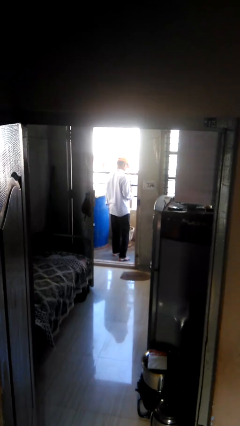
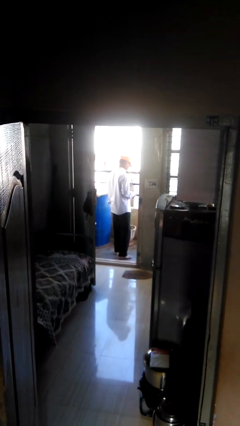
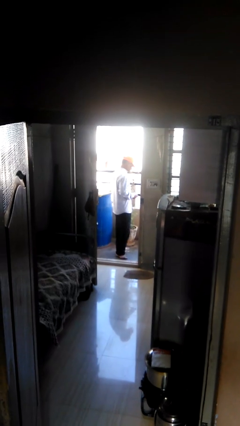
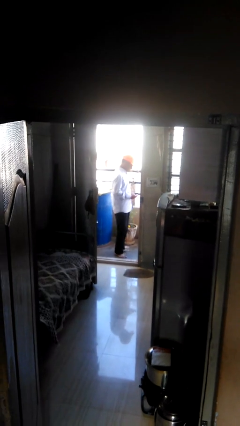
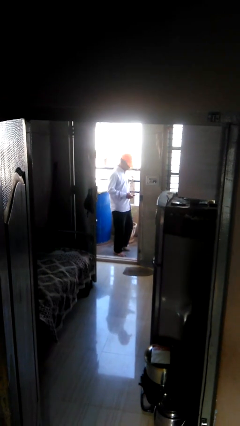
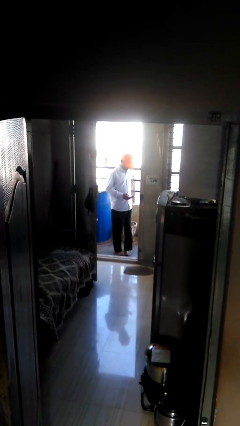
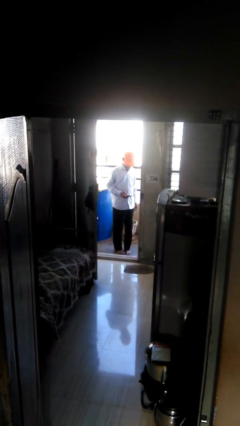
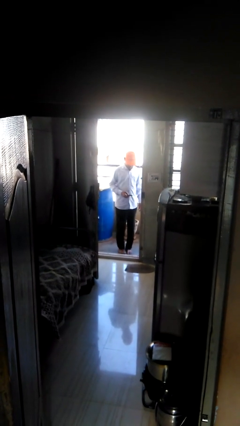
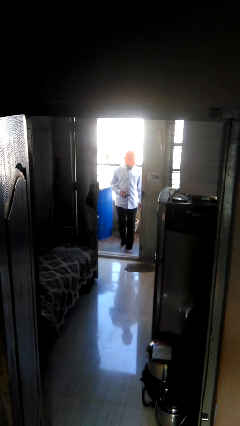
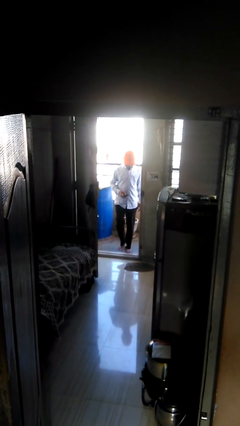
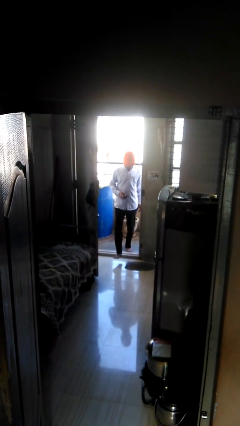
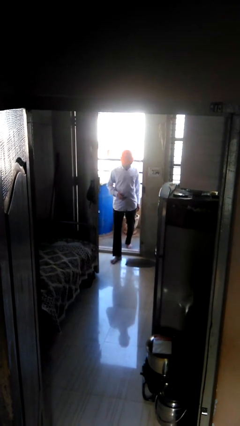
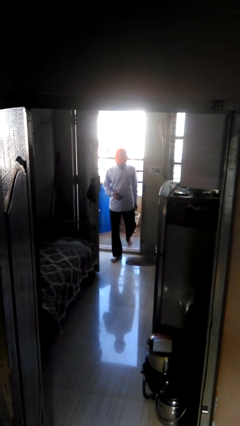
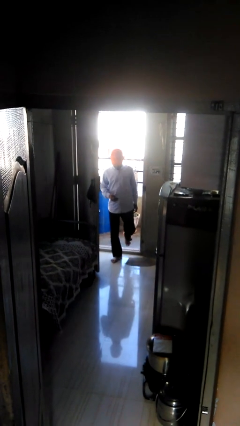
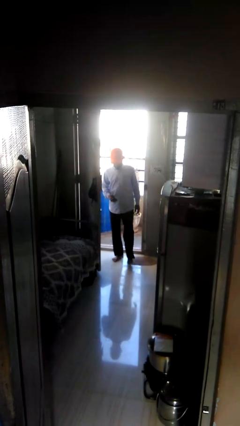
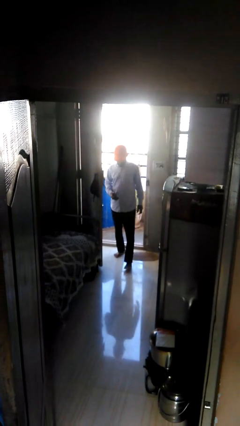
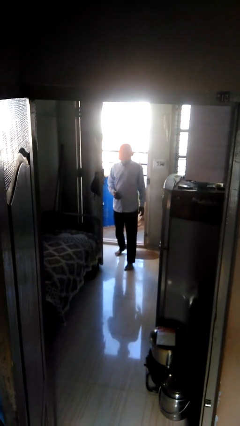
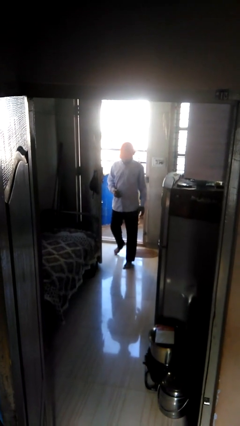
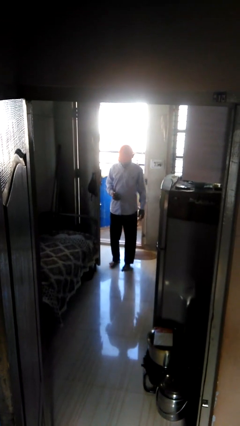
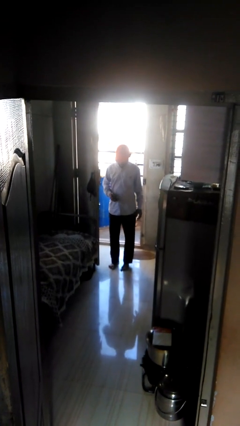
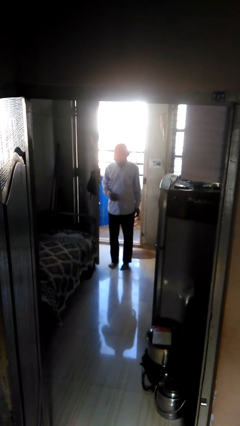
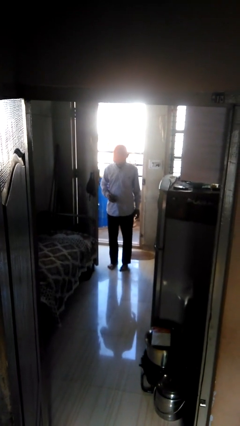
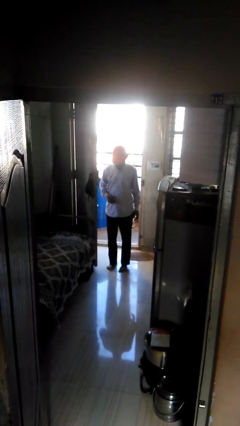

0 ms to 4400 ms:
person enters scene through structure

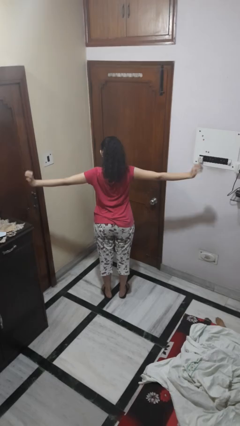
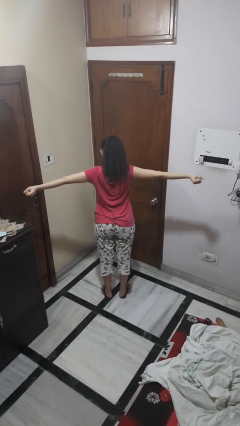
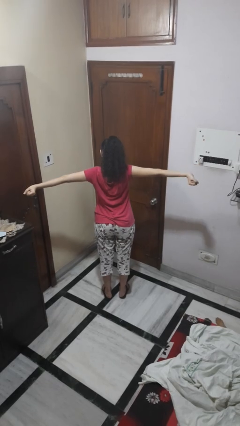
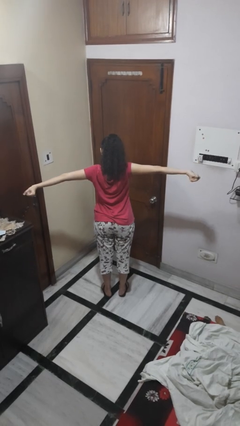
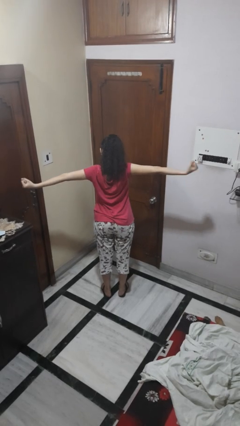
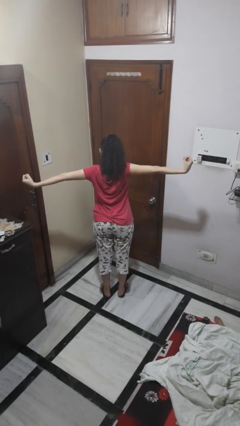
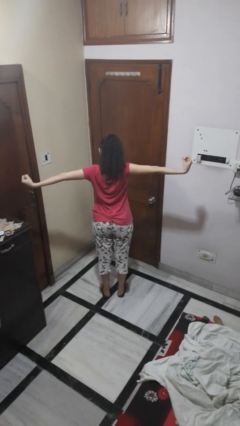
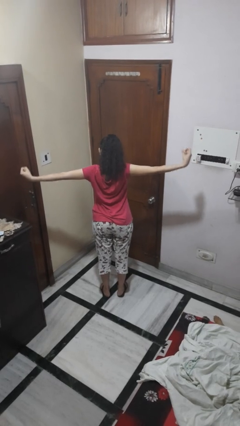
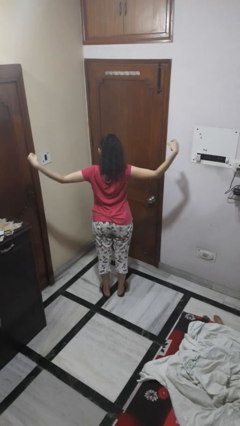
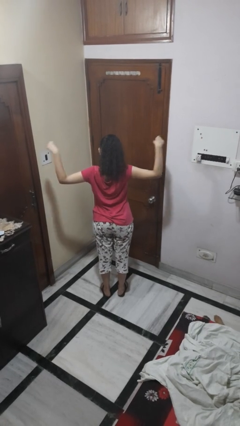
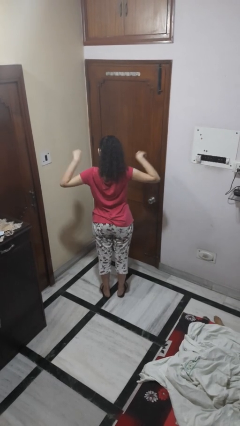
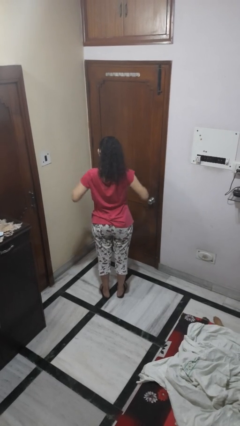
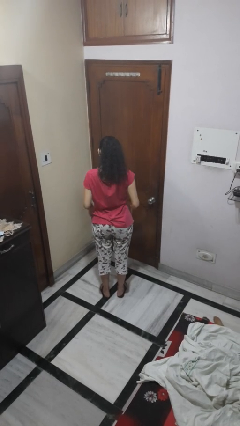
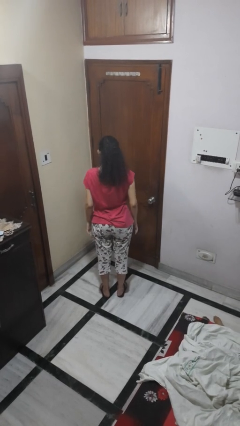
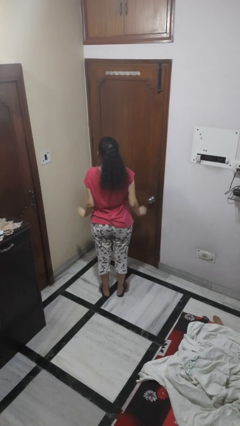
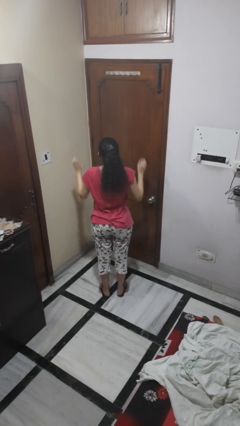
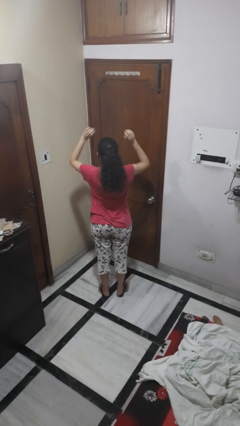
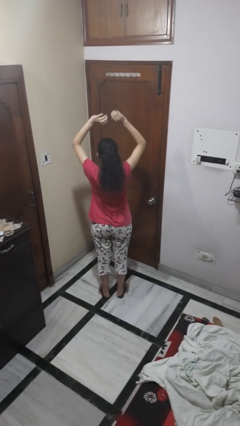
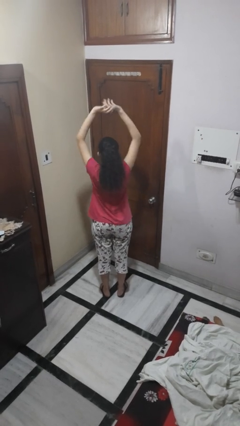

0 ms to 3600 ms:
person stretches arms to side

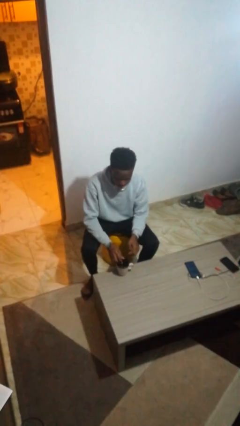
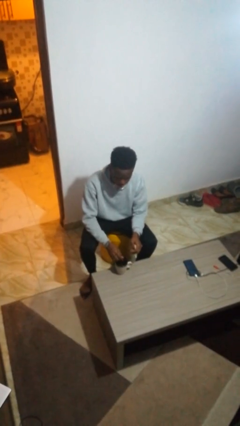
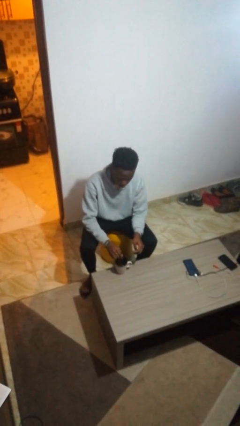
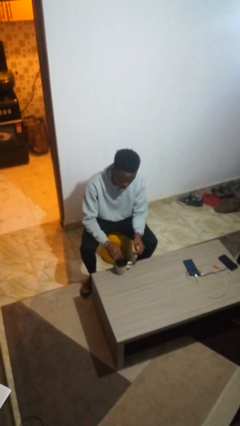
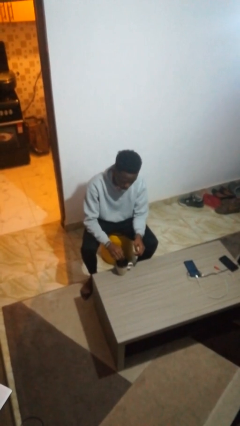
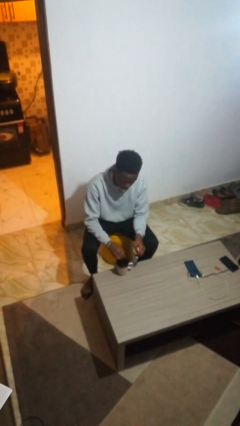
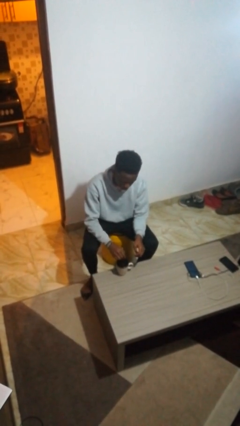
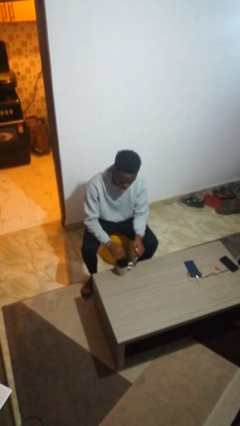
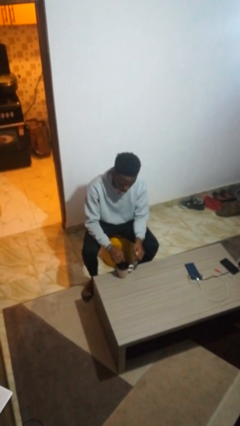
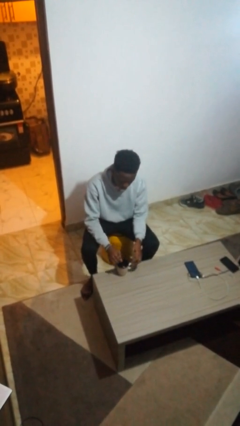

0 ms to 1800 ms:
person stirs mug

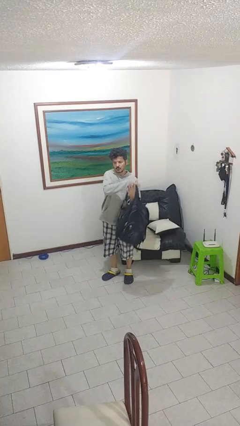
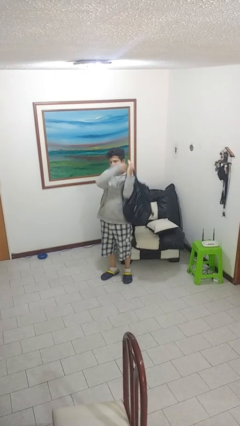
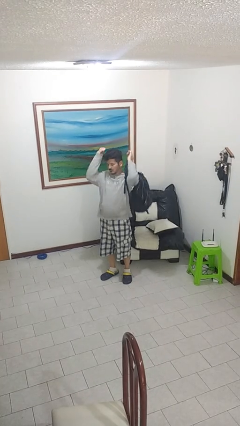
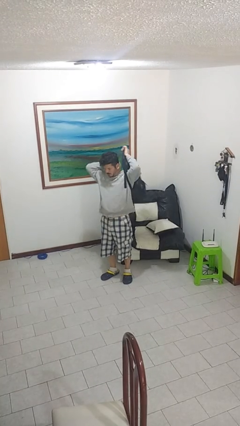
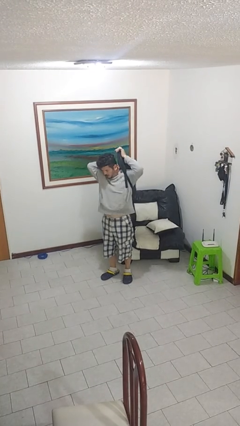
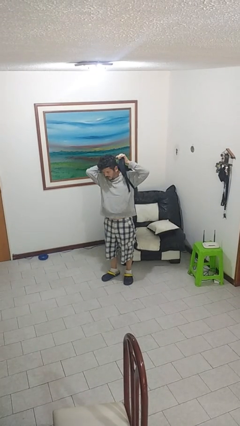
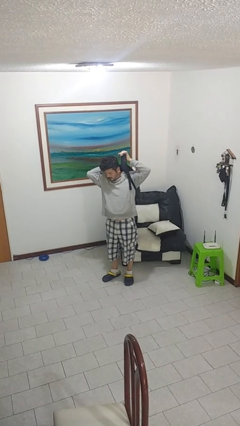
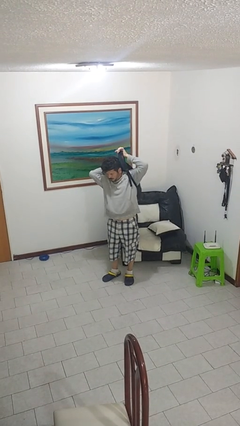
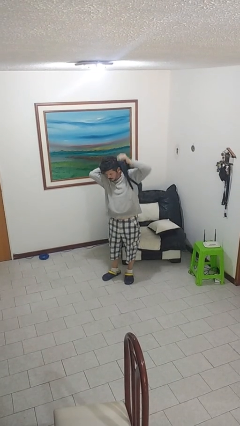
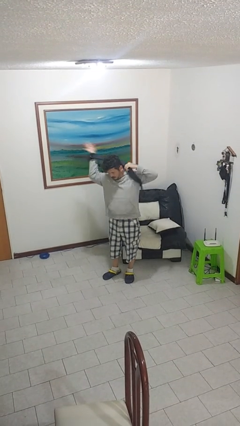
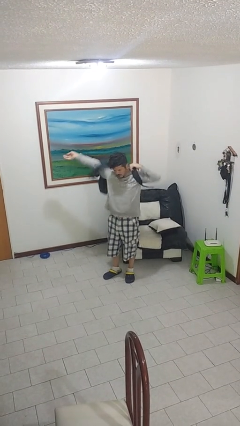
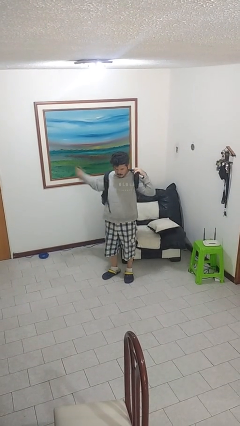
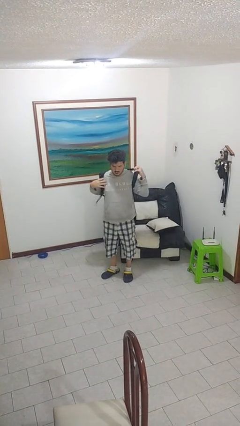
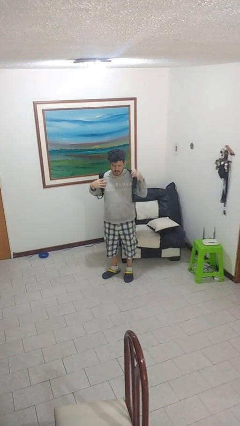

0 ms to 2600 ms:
person puts on backpack

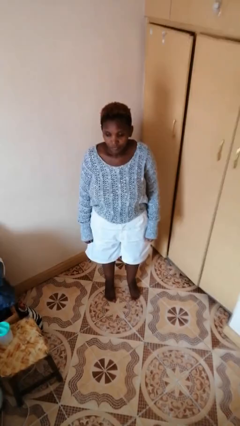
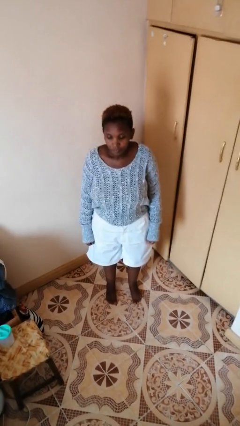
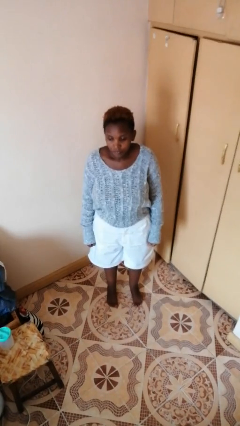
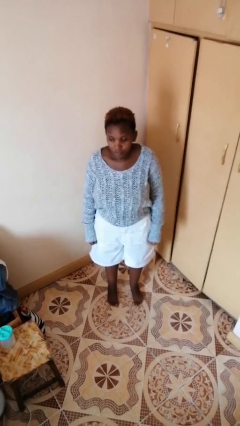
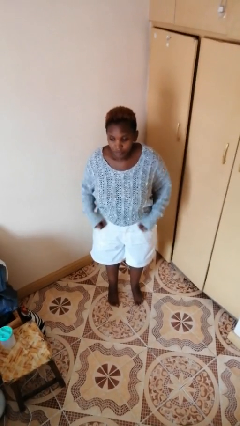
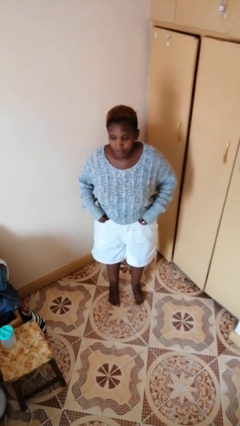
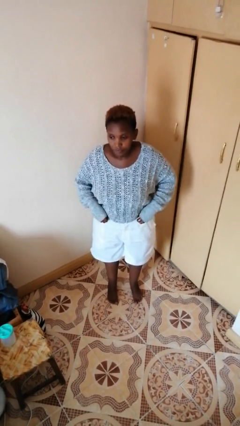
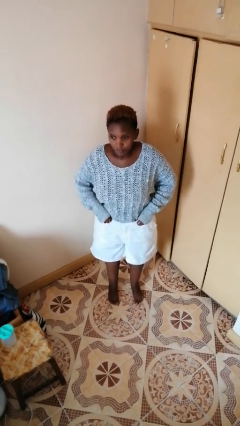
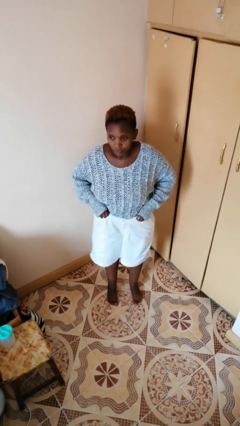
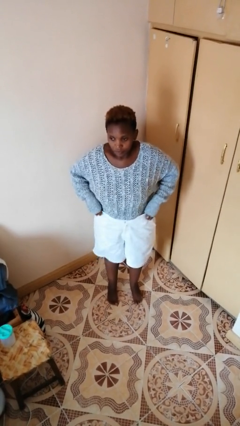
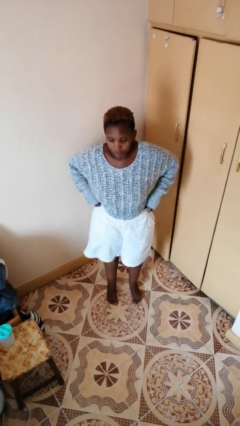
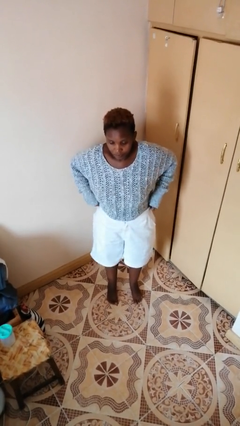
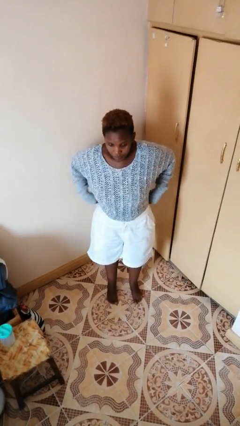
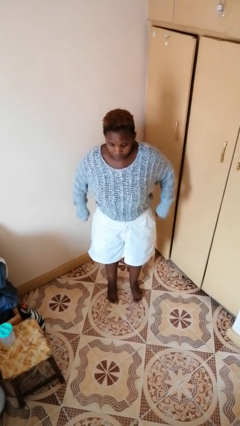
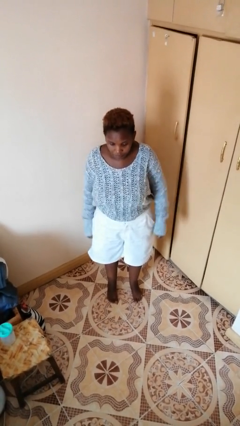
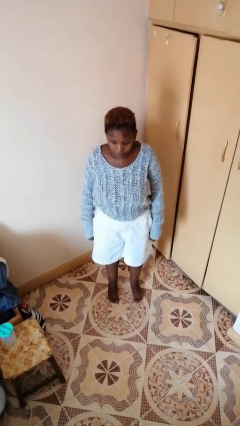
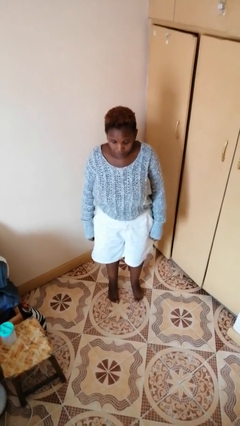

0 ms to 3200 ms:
person hikes up pants

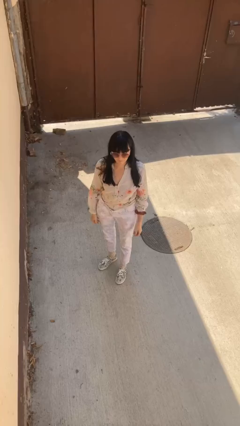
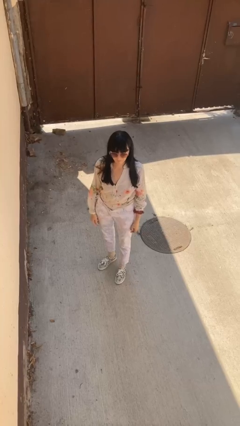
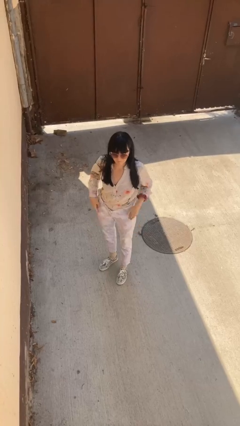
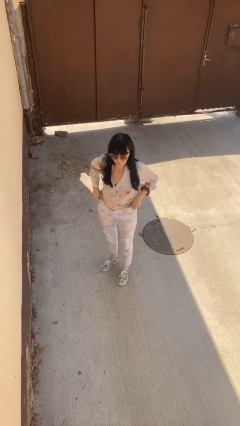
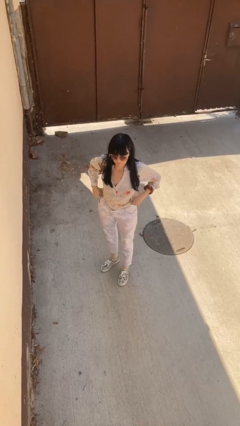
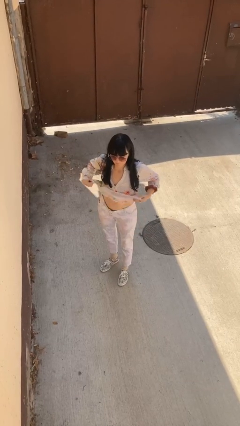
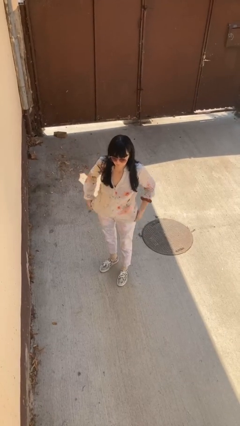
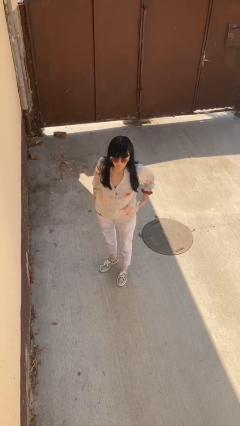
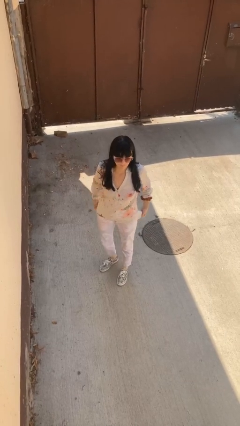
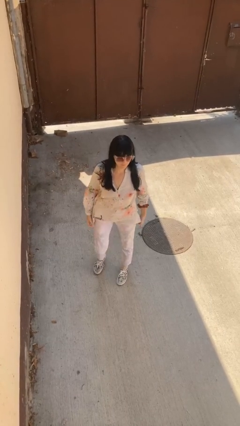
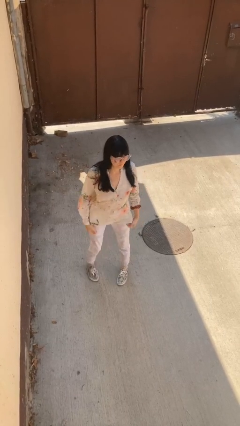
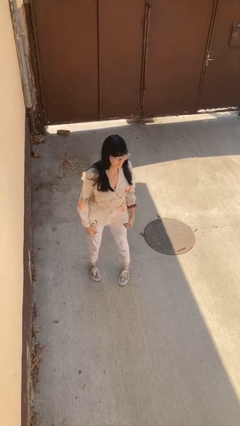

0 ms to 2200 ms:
person untucks shirt
